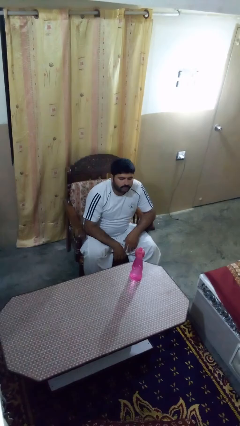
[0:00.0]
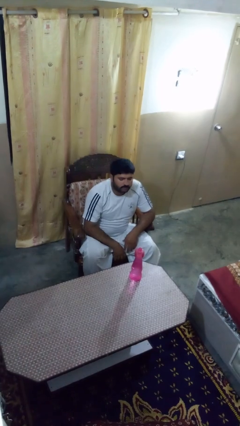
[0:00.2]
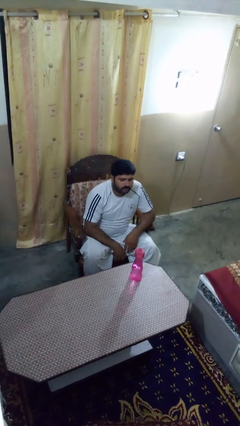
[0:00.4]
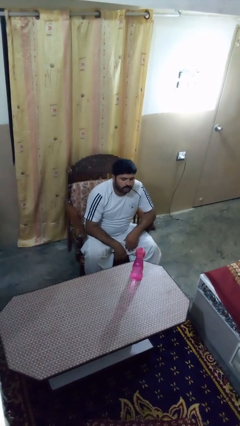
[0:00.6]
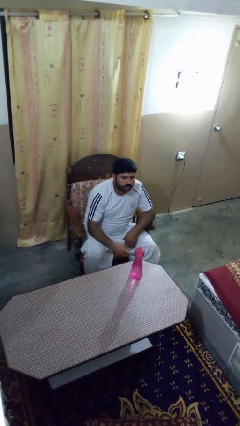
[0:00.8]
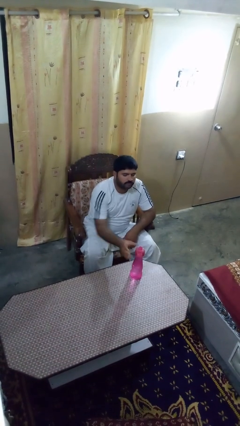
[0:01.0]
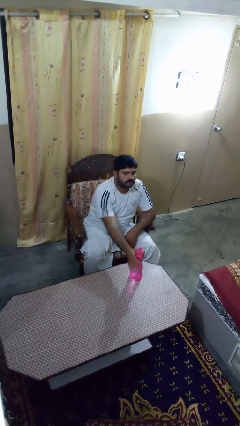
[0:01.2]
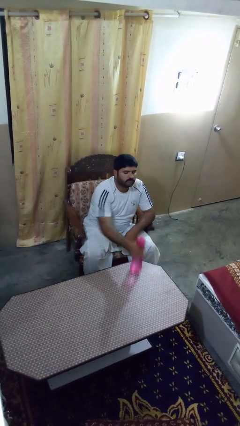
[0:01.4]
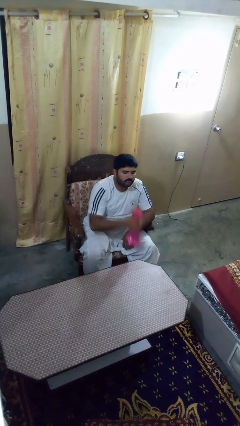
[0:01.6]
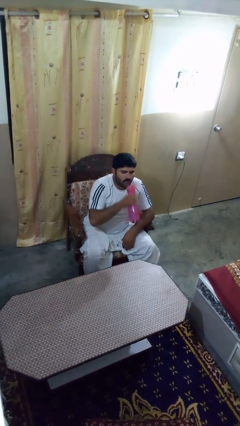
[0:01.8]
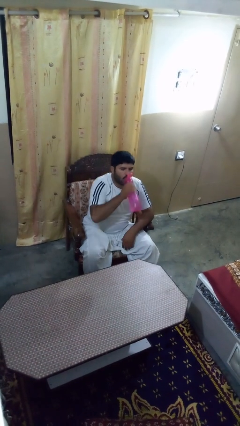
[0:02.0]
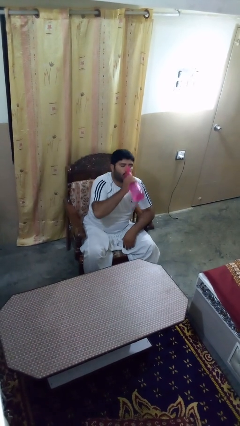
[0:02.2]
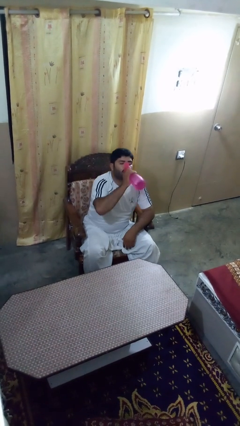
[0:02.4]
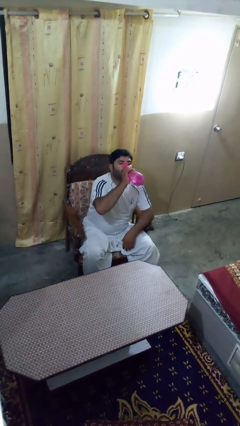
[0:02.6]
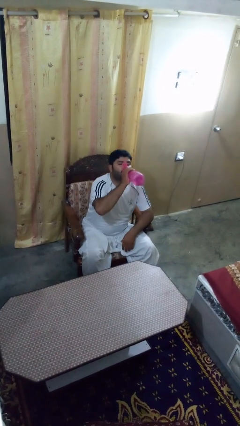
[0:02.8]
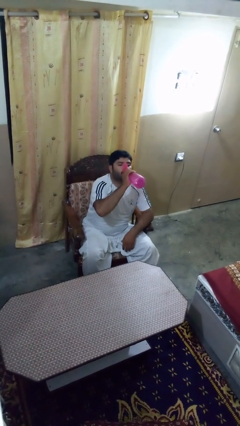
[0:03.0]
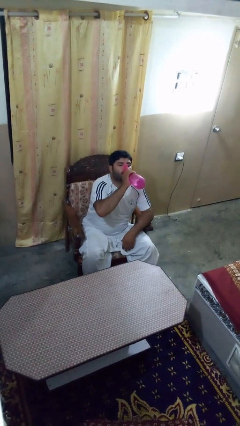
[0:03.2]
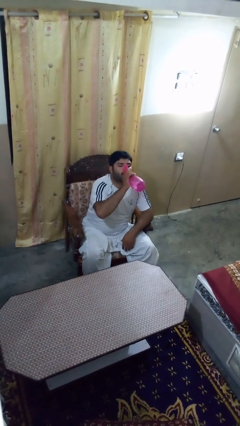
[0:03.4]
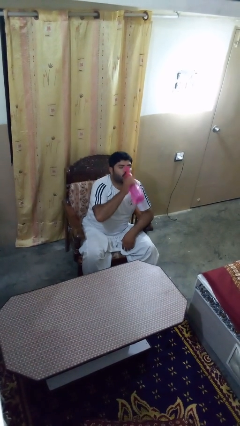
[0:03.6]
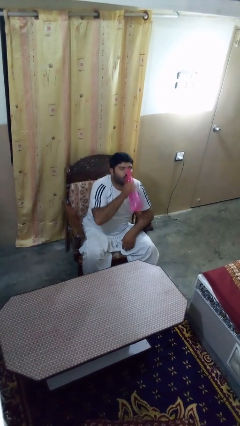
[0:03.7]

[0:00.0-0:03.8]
person drinks from bottle

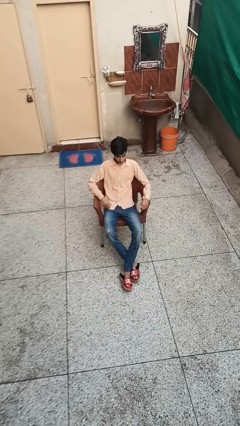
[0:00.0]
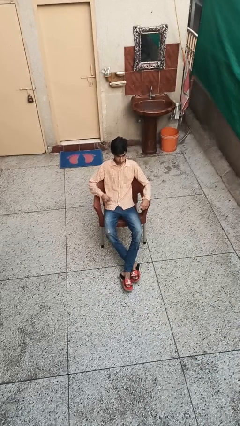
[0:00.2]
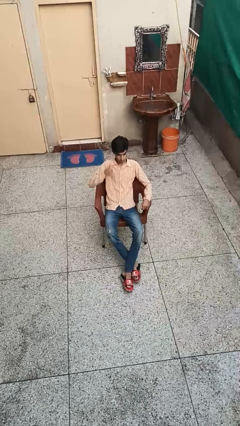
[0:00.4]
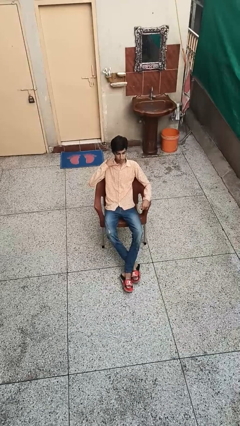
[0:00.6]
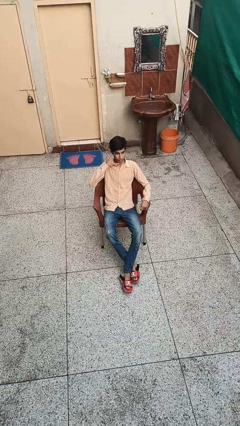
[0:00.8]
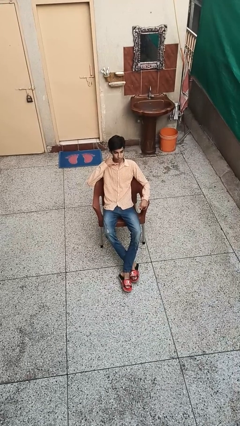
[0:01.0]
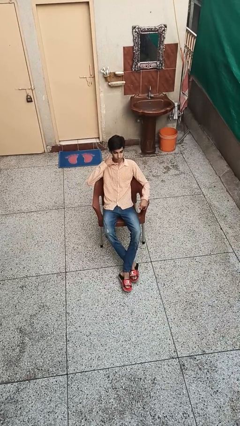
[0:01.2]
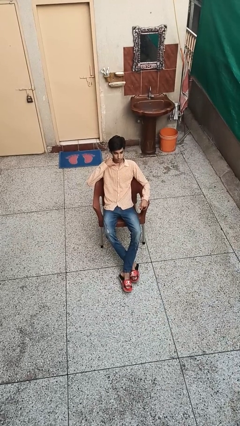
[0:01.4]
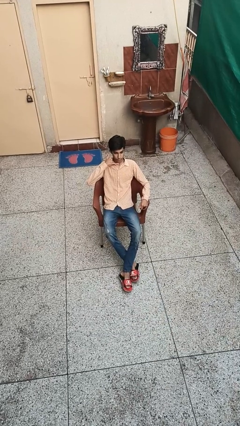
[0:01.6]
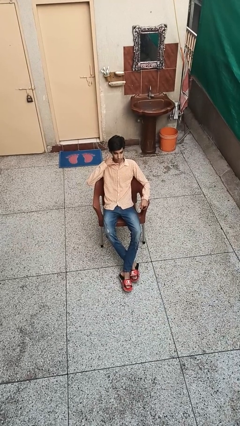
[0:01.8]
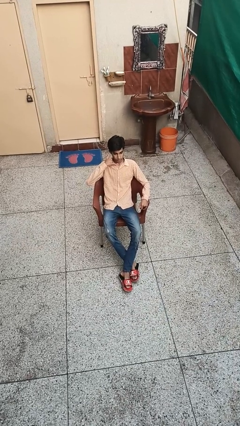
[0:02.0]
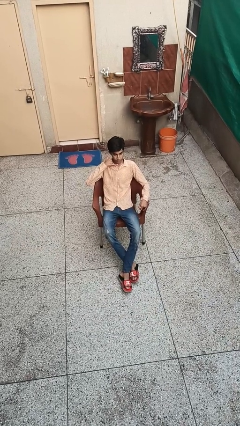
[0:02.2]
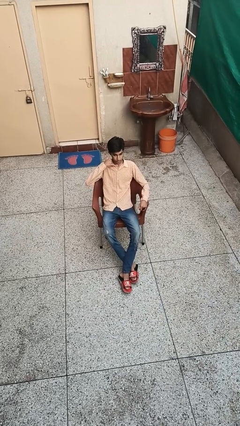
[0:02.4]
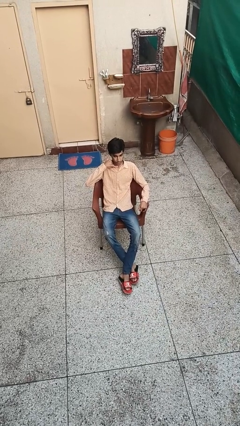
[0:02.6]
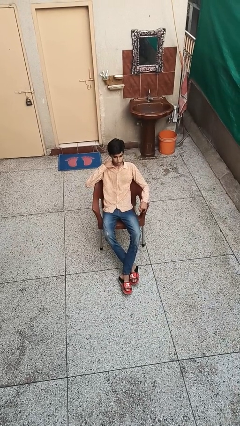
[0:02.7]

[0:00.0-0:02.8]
person gestures call me

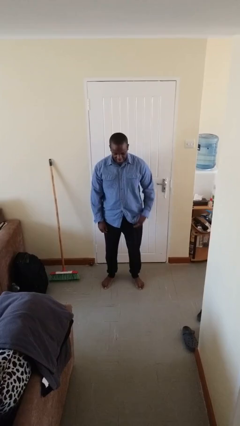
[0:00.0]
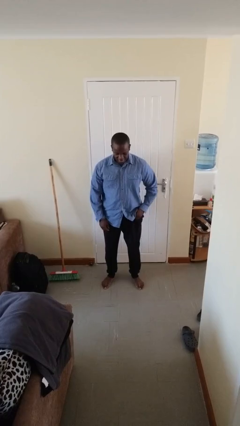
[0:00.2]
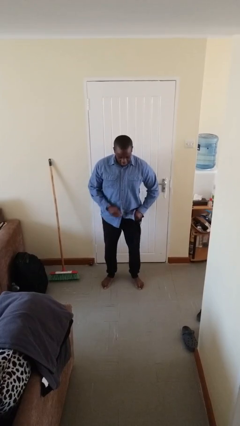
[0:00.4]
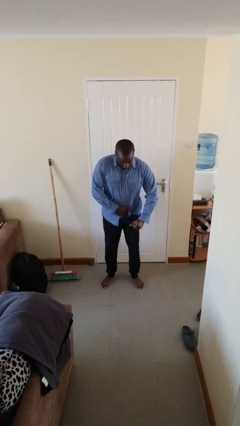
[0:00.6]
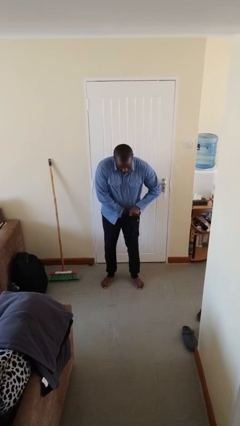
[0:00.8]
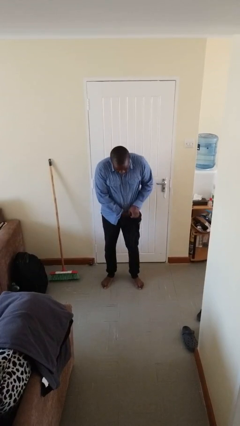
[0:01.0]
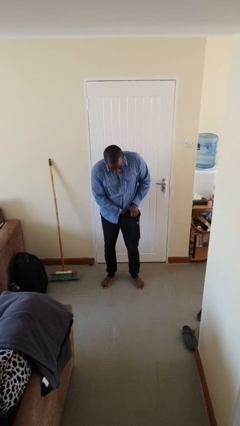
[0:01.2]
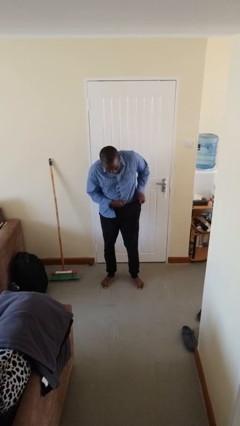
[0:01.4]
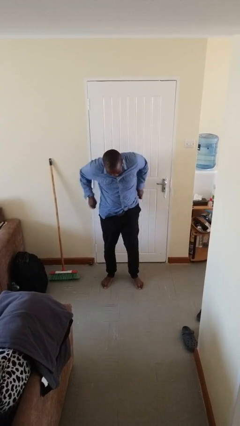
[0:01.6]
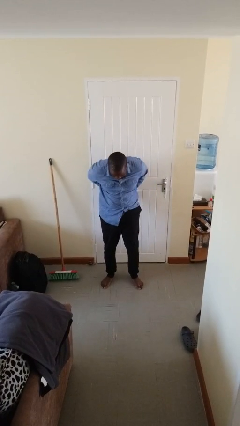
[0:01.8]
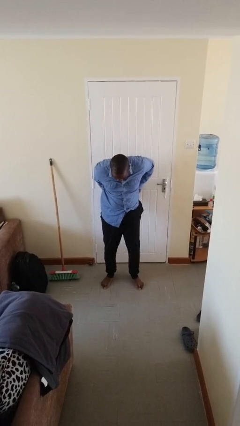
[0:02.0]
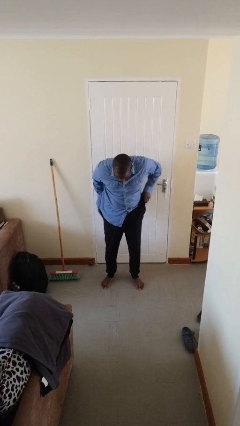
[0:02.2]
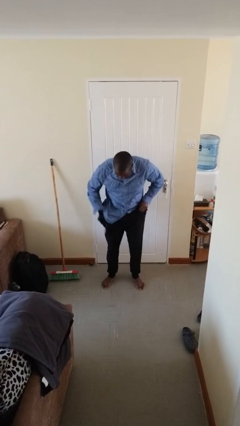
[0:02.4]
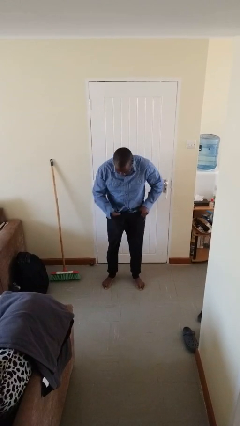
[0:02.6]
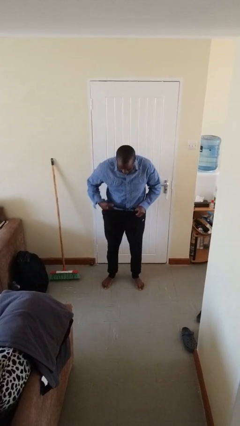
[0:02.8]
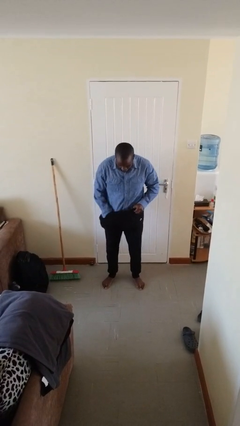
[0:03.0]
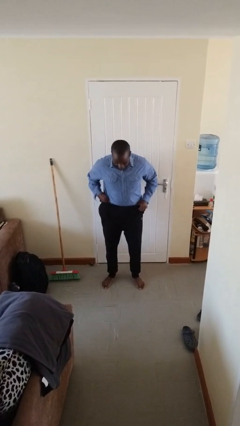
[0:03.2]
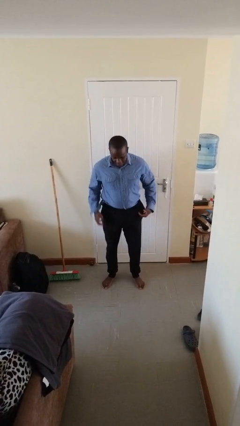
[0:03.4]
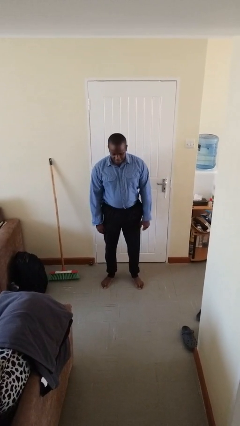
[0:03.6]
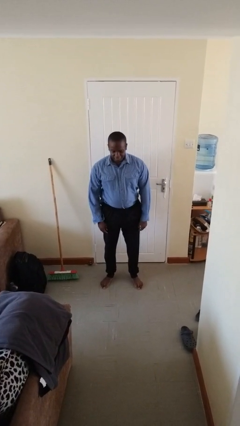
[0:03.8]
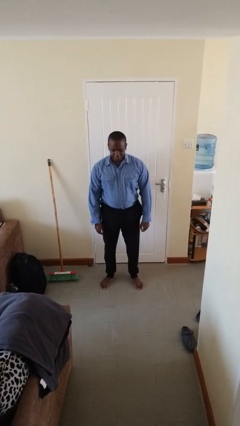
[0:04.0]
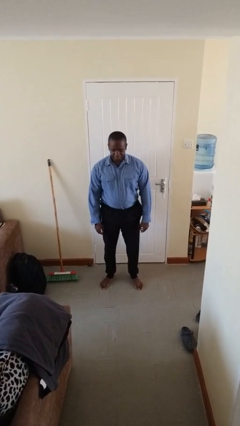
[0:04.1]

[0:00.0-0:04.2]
person tucks in shirt

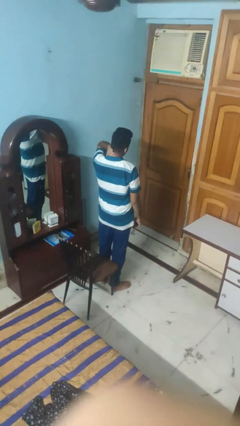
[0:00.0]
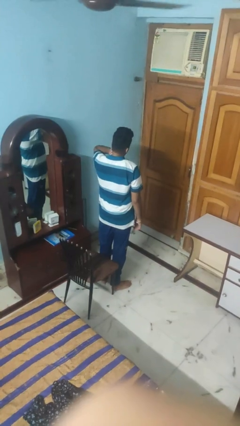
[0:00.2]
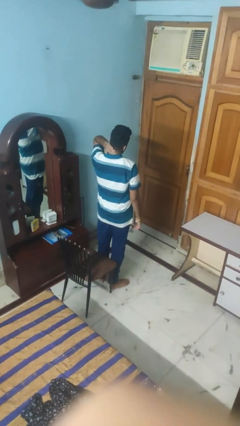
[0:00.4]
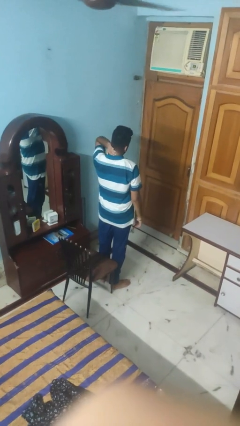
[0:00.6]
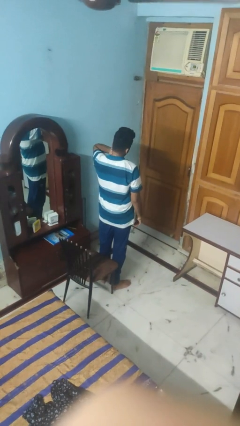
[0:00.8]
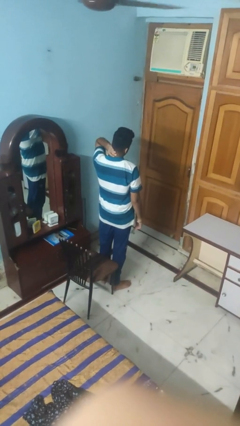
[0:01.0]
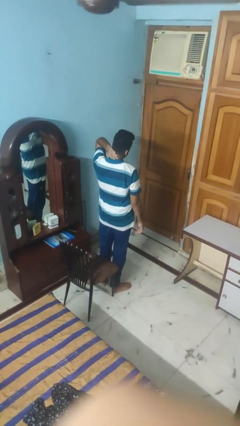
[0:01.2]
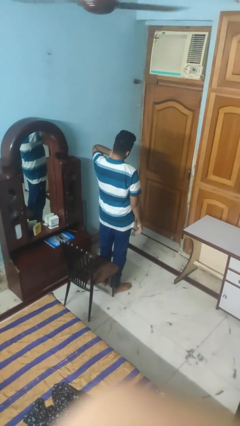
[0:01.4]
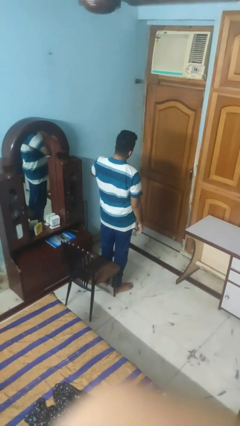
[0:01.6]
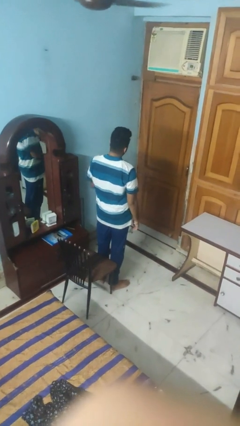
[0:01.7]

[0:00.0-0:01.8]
person rubs neck

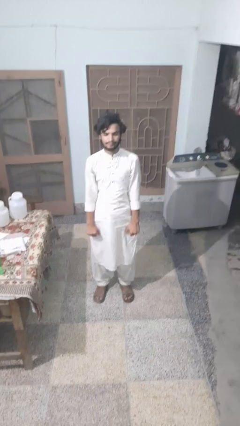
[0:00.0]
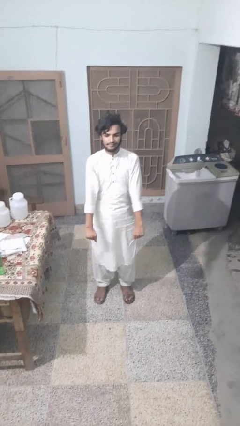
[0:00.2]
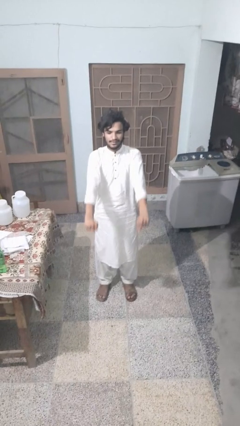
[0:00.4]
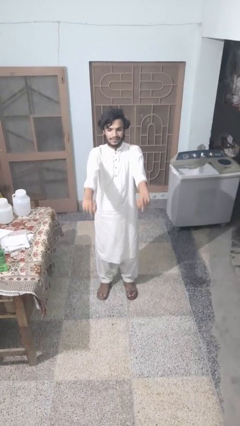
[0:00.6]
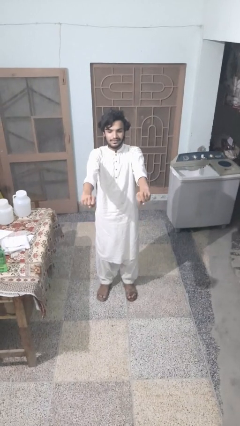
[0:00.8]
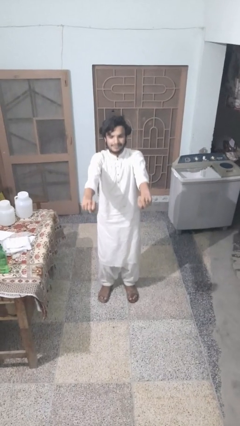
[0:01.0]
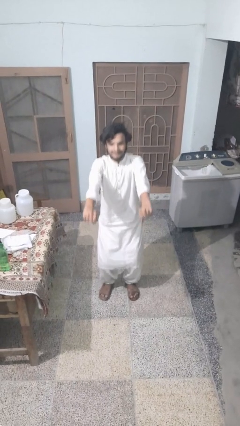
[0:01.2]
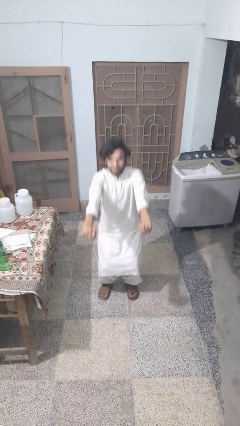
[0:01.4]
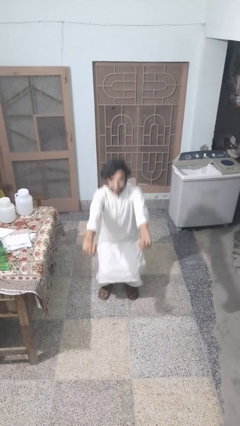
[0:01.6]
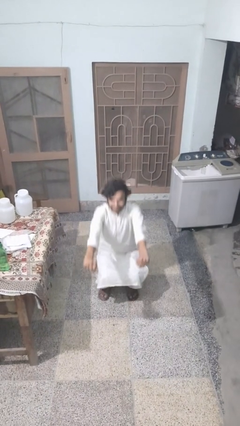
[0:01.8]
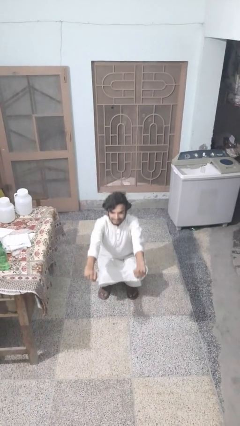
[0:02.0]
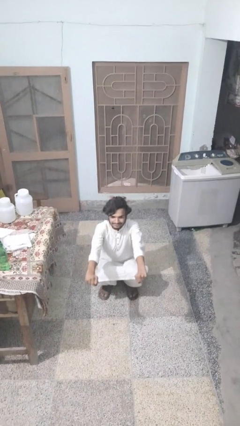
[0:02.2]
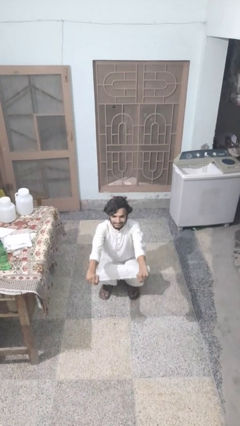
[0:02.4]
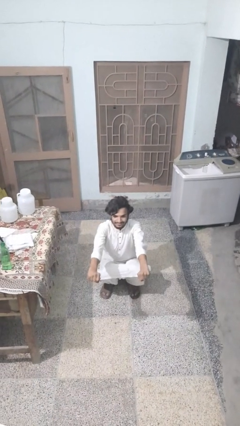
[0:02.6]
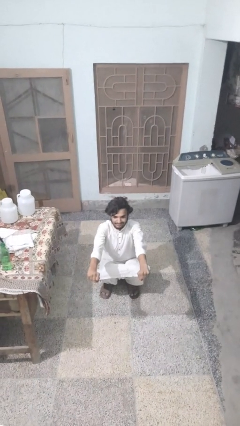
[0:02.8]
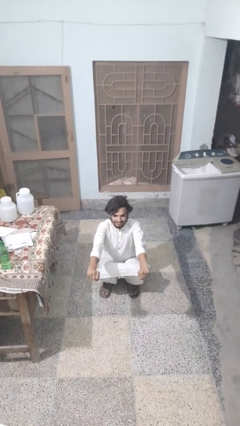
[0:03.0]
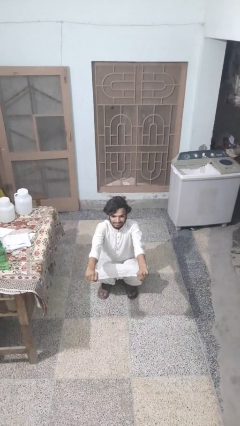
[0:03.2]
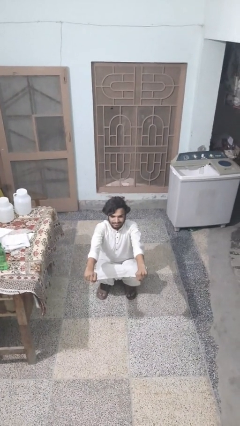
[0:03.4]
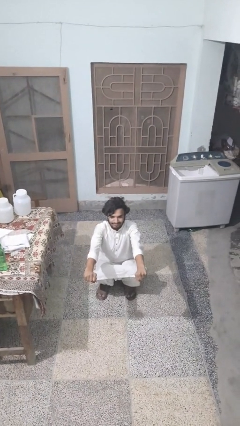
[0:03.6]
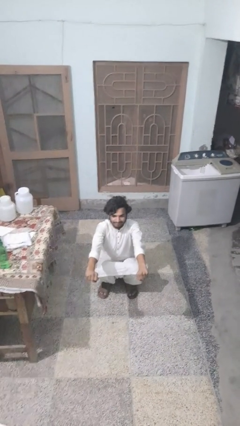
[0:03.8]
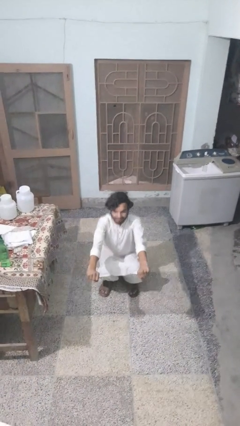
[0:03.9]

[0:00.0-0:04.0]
person squats

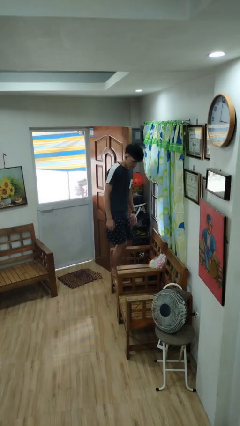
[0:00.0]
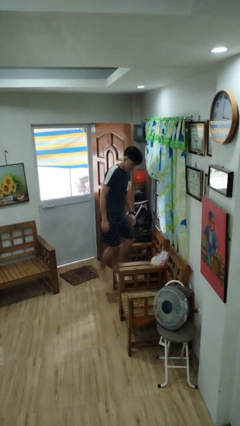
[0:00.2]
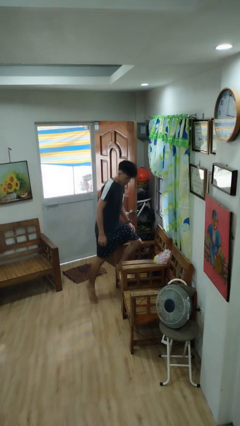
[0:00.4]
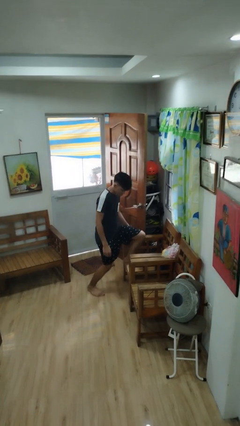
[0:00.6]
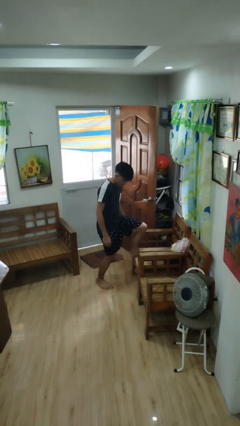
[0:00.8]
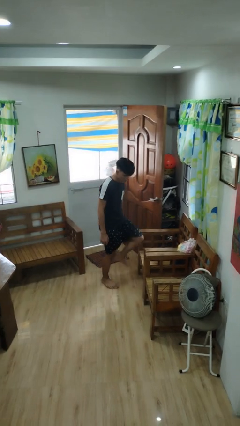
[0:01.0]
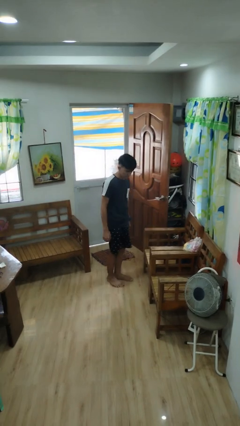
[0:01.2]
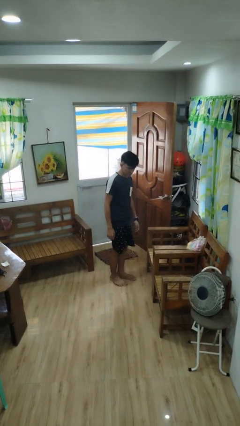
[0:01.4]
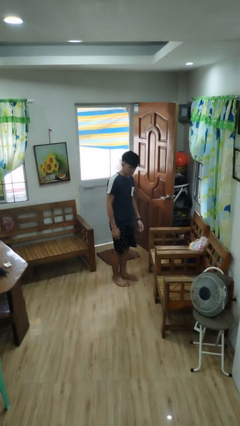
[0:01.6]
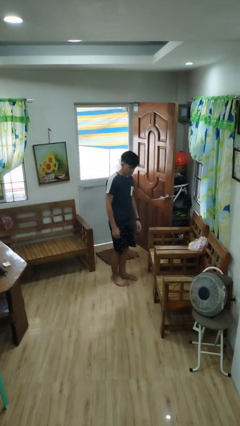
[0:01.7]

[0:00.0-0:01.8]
person climbs off chair
